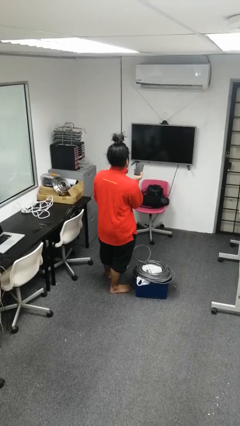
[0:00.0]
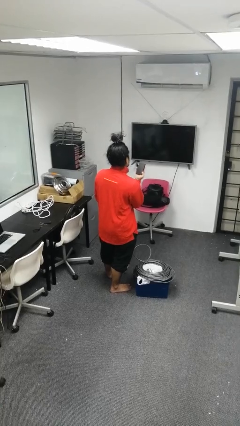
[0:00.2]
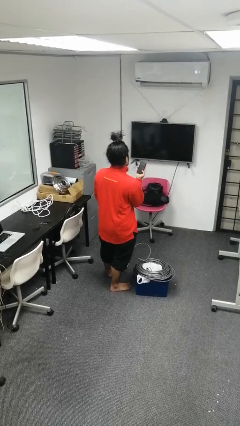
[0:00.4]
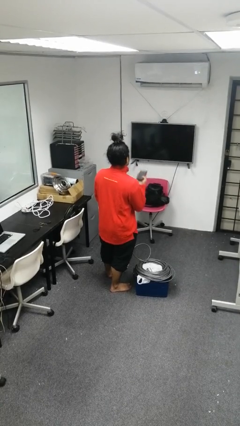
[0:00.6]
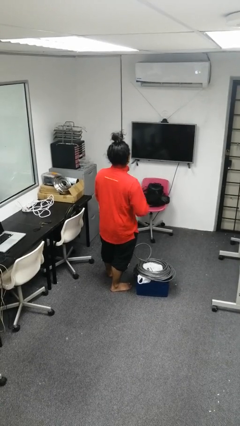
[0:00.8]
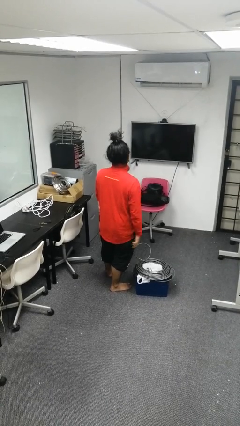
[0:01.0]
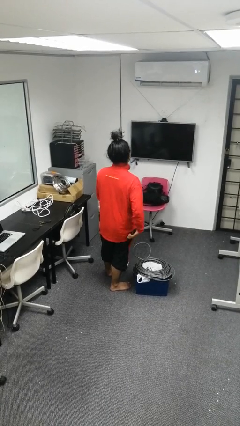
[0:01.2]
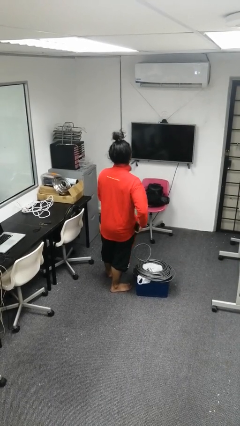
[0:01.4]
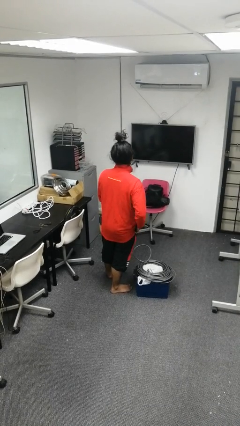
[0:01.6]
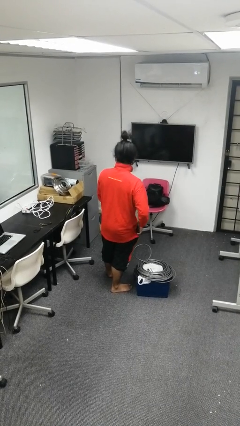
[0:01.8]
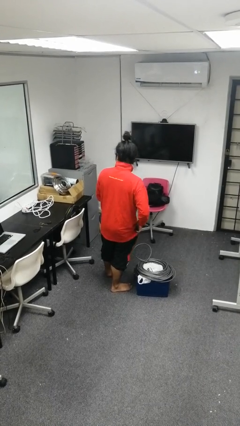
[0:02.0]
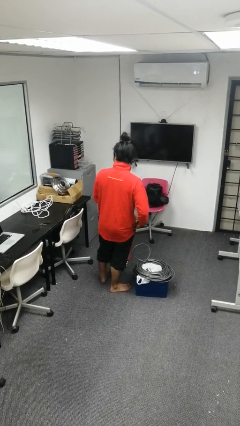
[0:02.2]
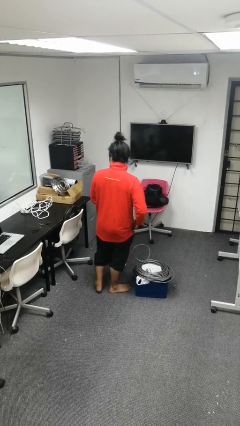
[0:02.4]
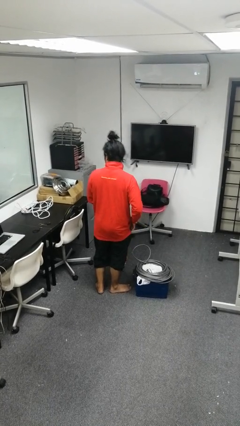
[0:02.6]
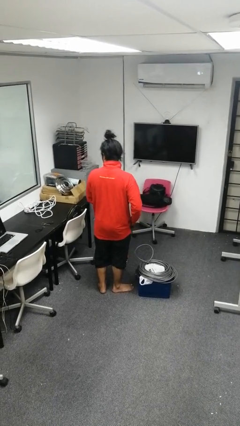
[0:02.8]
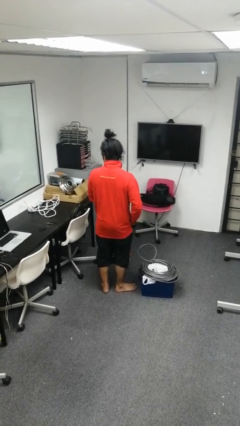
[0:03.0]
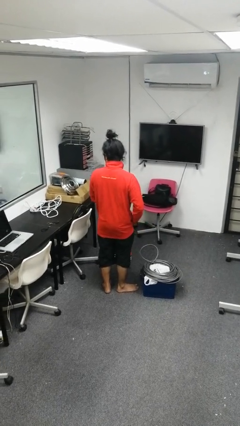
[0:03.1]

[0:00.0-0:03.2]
person puts phone into pocket

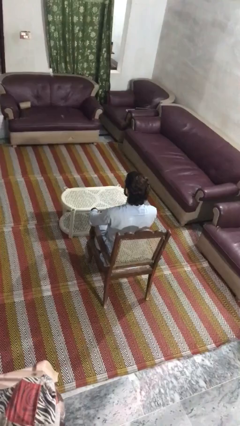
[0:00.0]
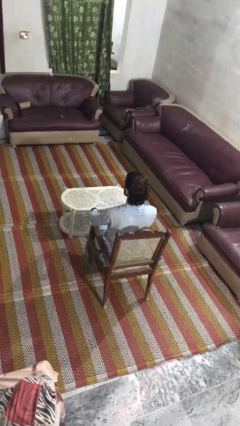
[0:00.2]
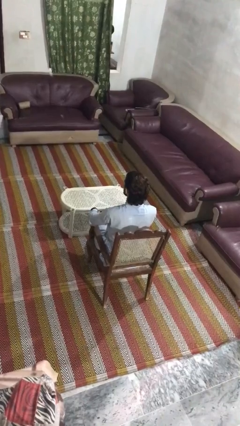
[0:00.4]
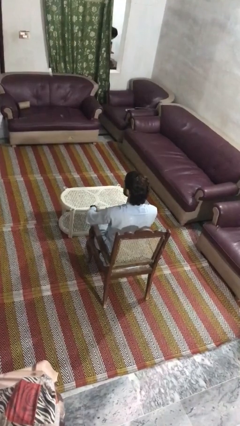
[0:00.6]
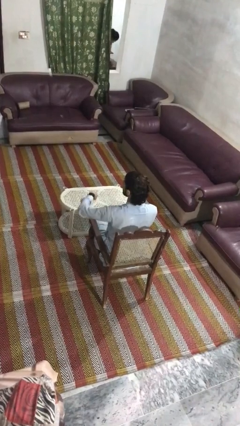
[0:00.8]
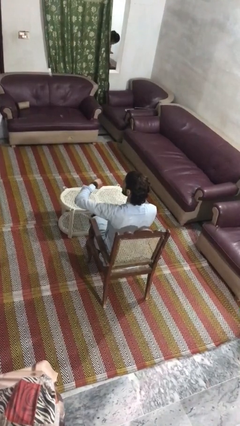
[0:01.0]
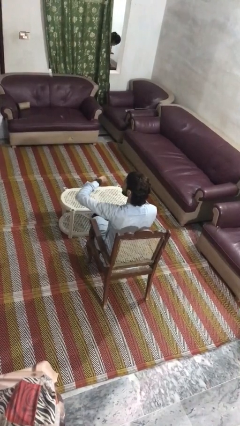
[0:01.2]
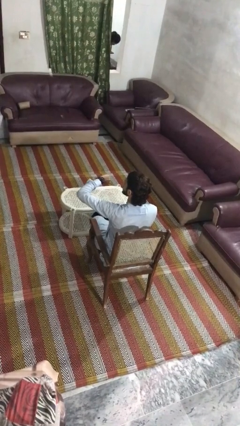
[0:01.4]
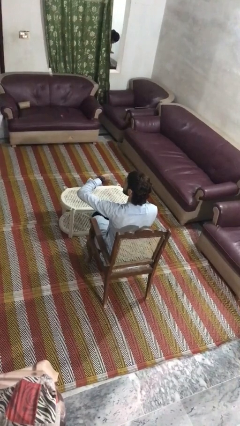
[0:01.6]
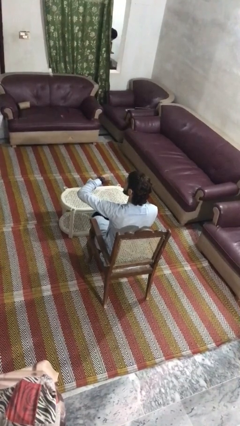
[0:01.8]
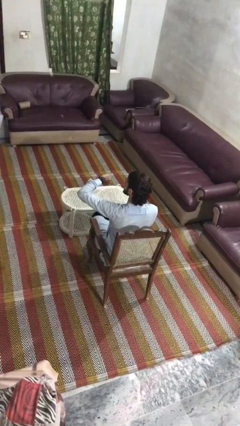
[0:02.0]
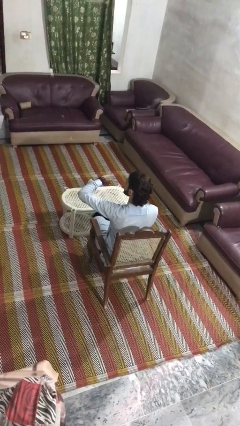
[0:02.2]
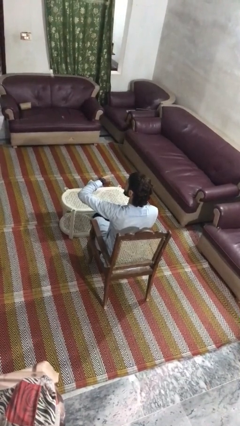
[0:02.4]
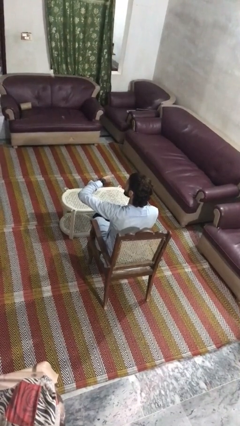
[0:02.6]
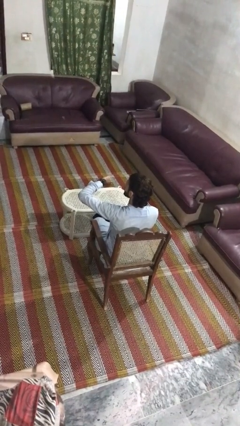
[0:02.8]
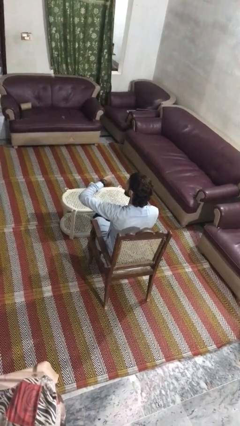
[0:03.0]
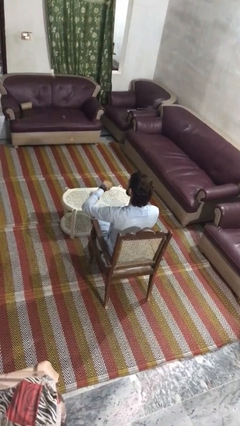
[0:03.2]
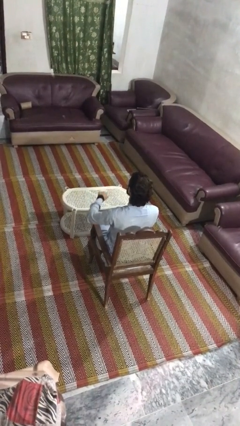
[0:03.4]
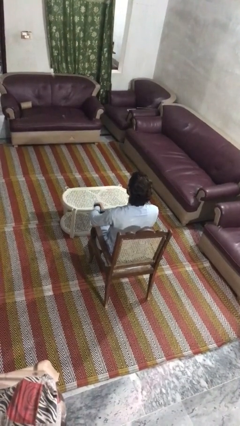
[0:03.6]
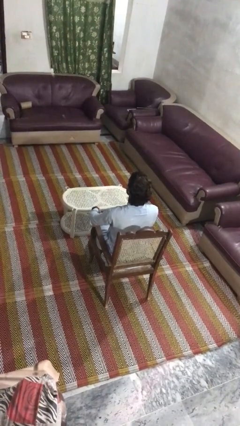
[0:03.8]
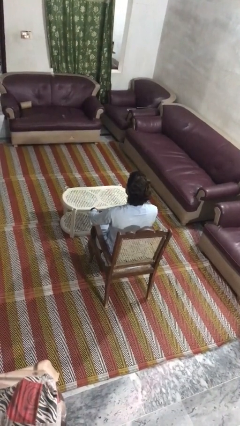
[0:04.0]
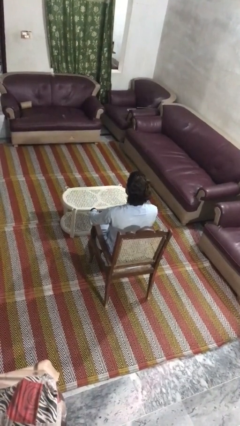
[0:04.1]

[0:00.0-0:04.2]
person looks at wristwatch

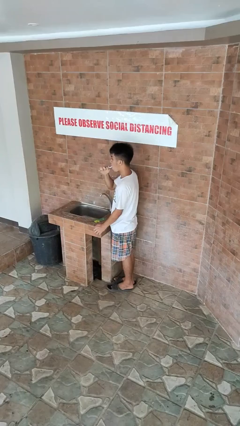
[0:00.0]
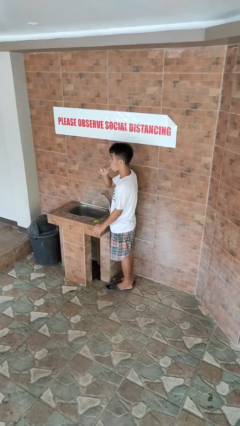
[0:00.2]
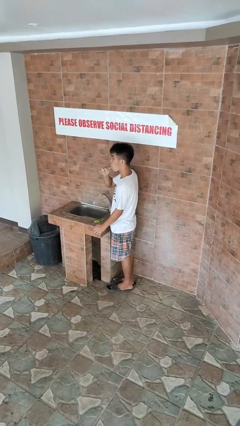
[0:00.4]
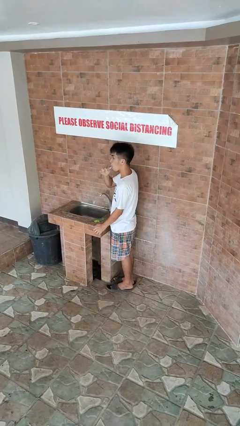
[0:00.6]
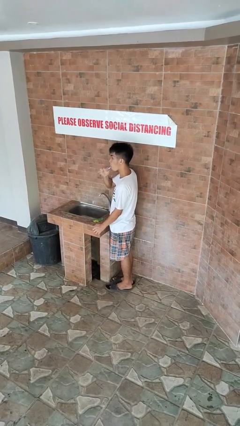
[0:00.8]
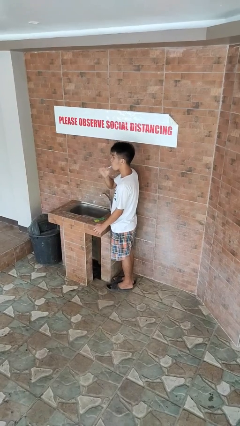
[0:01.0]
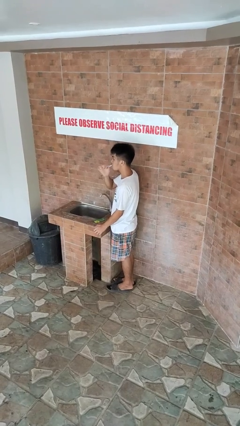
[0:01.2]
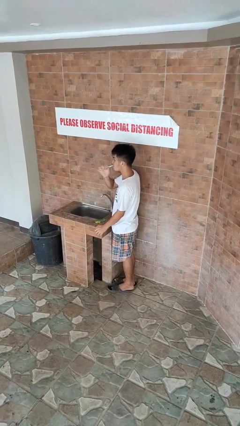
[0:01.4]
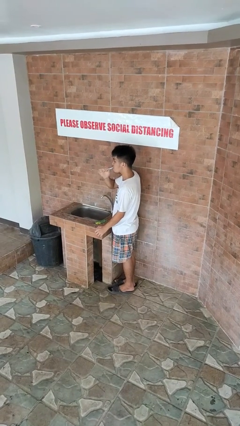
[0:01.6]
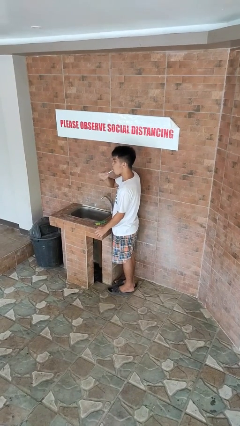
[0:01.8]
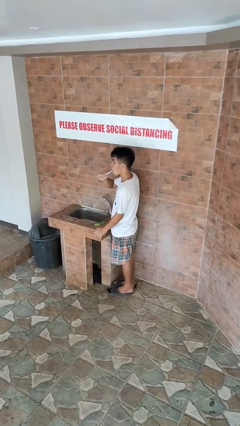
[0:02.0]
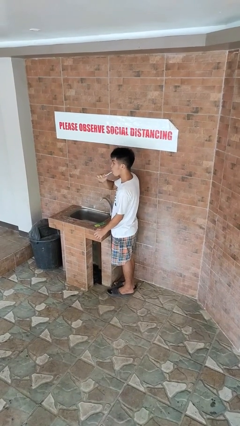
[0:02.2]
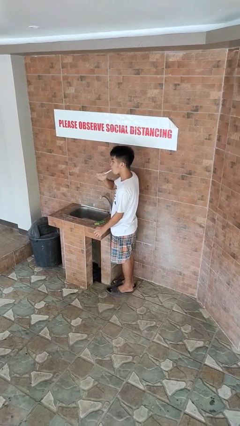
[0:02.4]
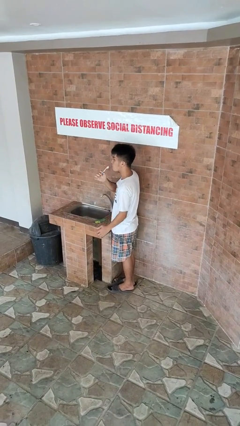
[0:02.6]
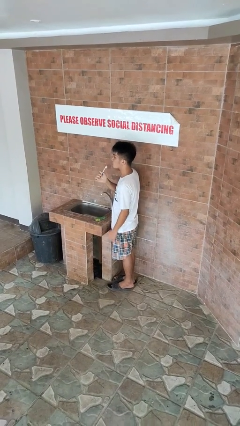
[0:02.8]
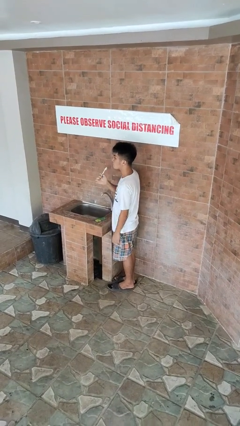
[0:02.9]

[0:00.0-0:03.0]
person brushes teeth

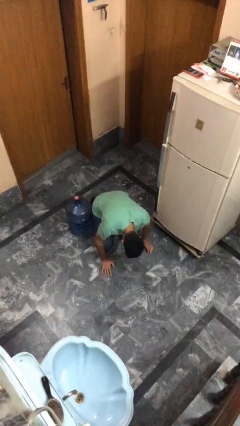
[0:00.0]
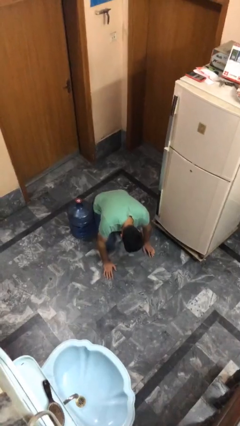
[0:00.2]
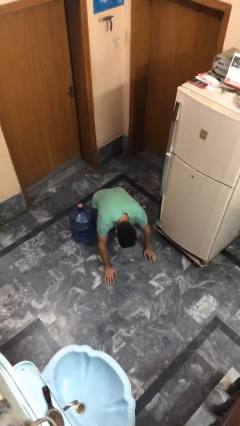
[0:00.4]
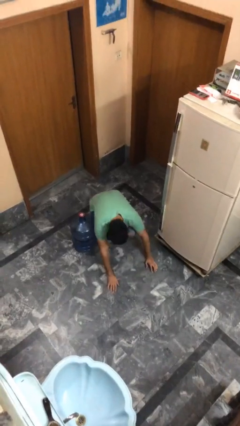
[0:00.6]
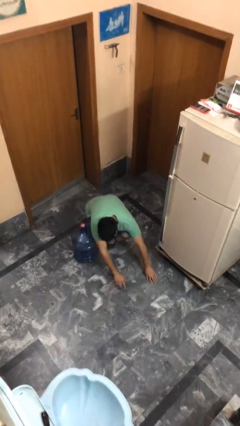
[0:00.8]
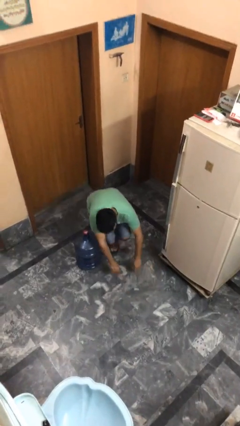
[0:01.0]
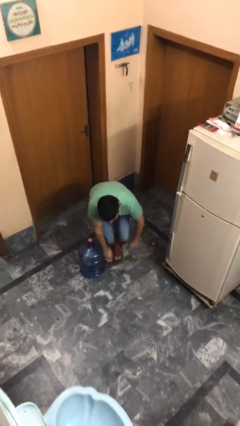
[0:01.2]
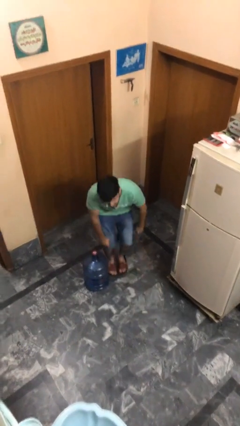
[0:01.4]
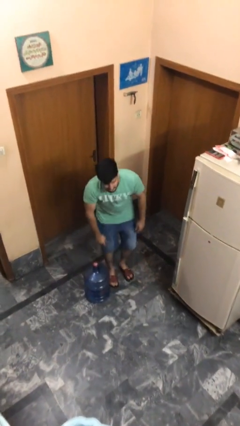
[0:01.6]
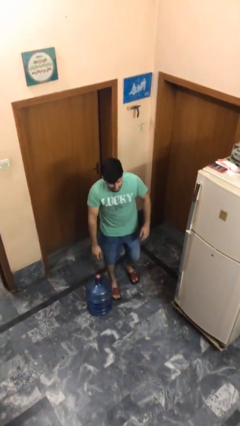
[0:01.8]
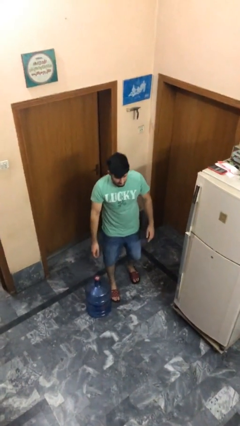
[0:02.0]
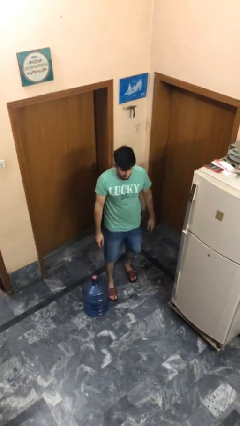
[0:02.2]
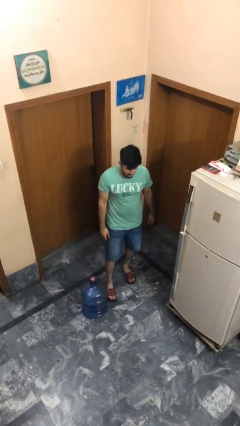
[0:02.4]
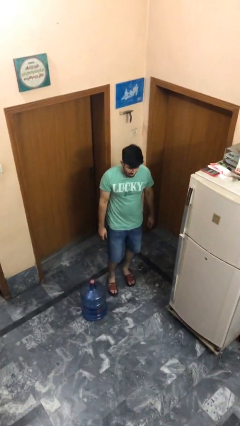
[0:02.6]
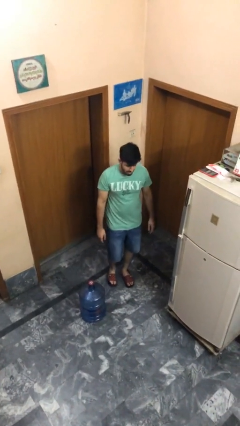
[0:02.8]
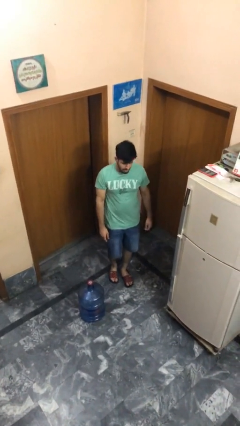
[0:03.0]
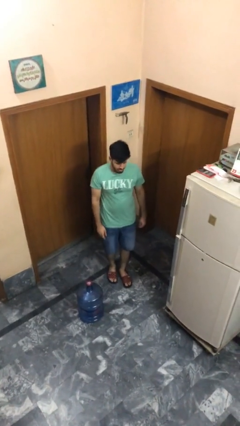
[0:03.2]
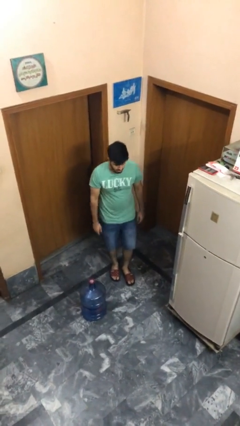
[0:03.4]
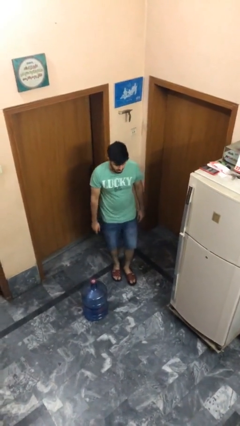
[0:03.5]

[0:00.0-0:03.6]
person stands up from floor

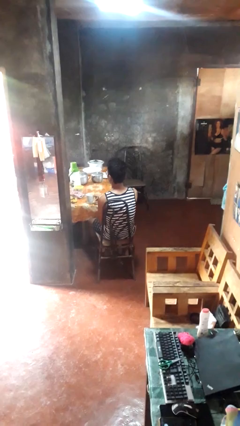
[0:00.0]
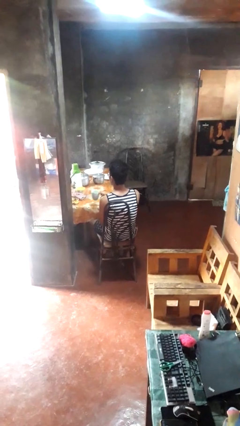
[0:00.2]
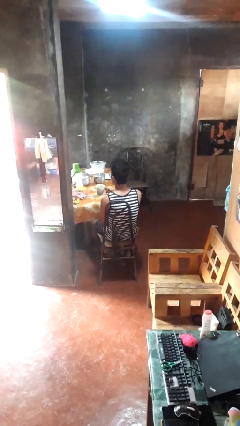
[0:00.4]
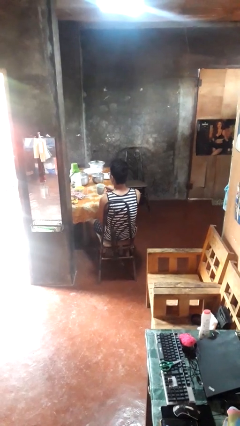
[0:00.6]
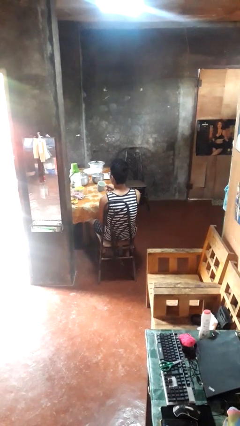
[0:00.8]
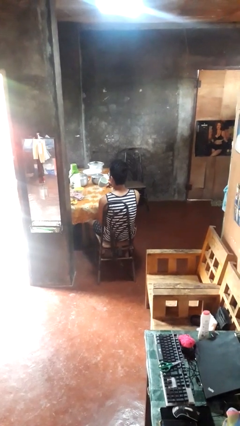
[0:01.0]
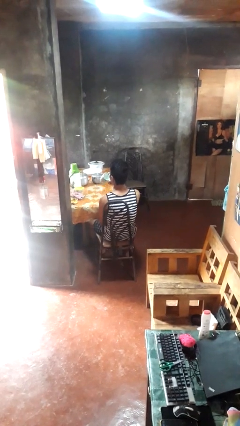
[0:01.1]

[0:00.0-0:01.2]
person picks up object from table

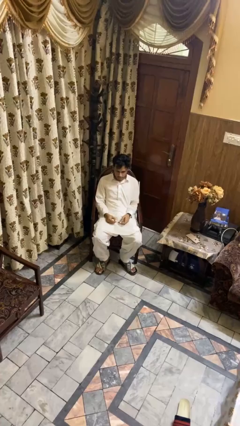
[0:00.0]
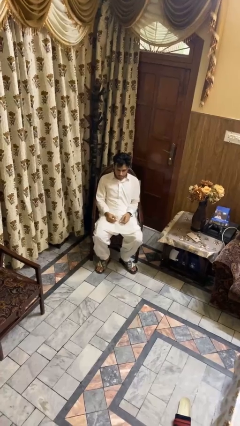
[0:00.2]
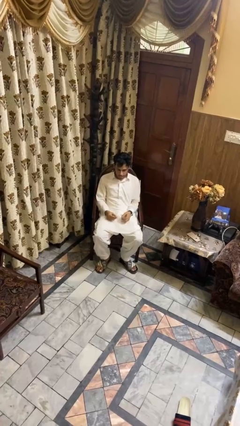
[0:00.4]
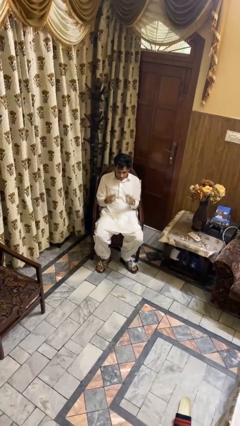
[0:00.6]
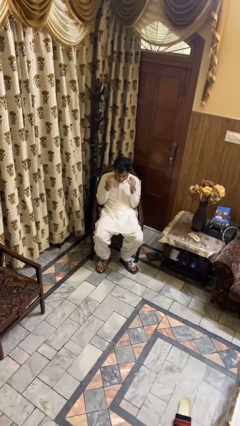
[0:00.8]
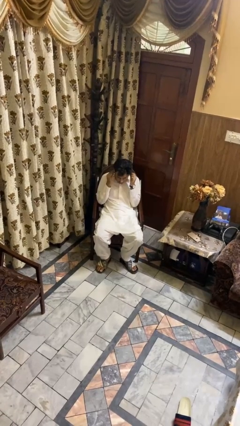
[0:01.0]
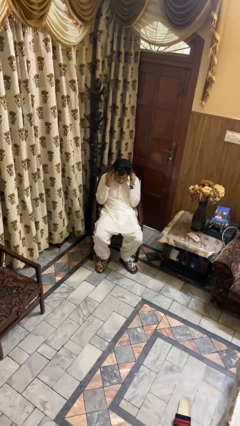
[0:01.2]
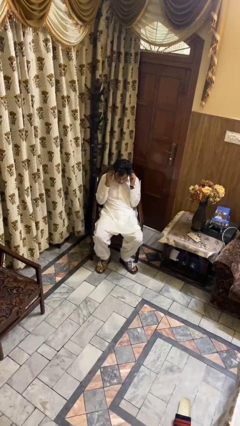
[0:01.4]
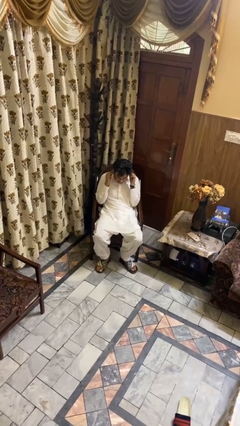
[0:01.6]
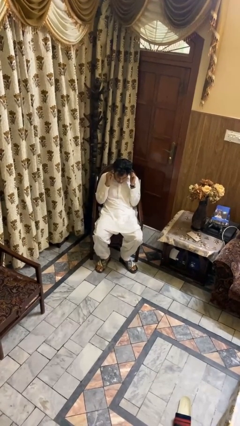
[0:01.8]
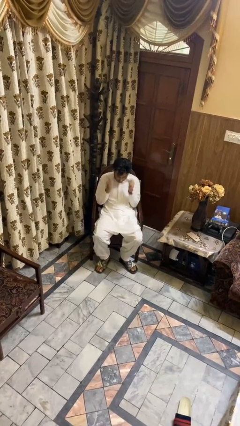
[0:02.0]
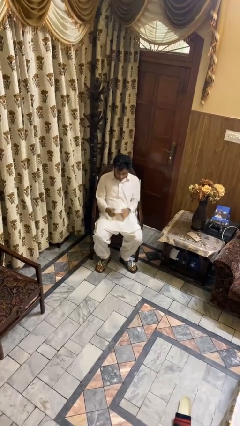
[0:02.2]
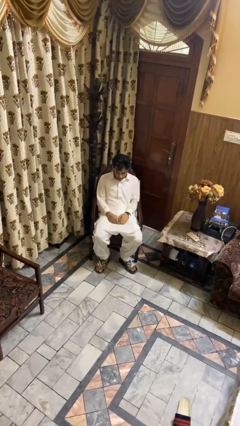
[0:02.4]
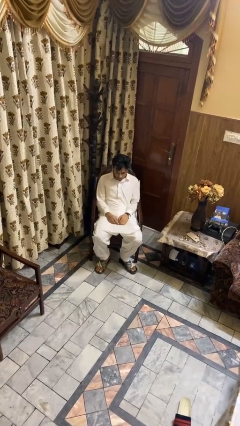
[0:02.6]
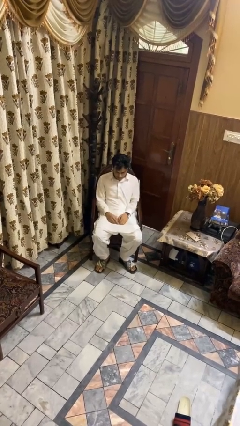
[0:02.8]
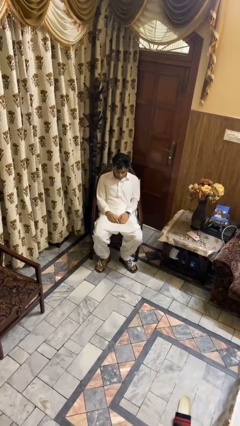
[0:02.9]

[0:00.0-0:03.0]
person puts on headphones
